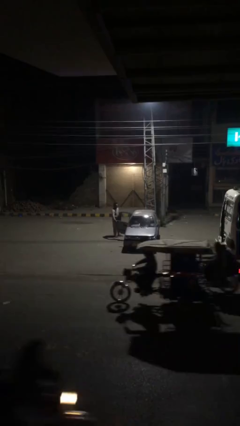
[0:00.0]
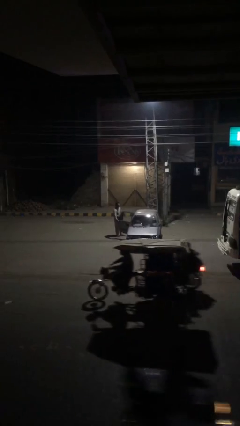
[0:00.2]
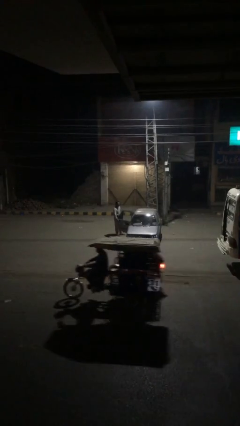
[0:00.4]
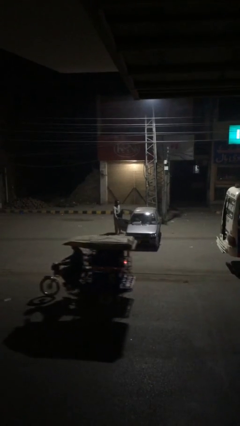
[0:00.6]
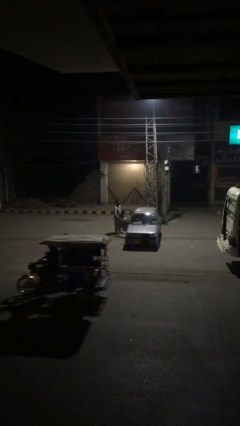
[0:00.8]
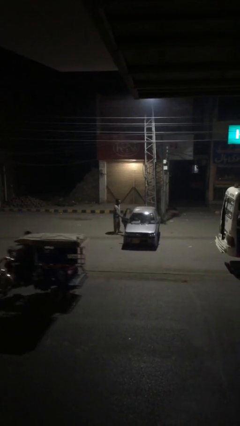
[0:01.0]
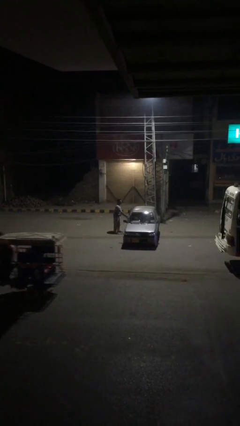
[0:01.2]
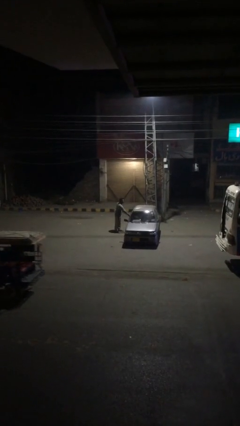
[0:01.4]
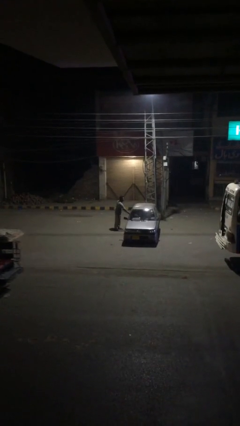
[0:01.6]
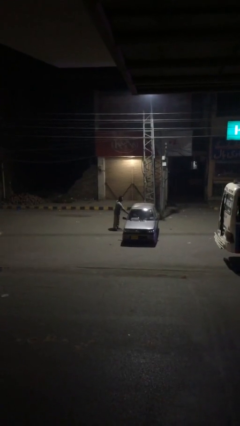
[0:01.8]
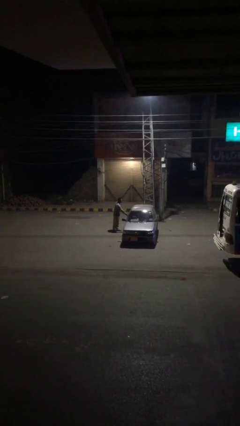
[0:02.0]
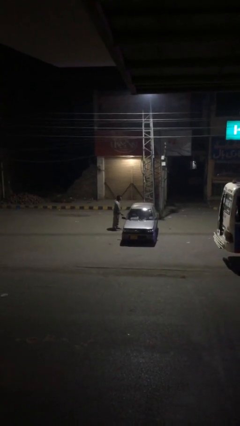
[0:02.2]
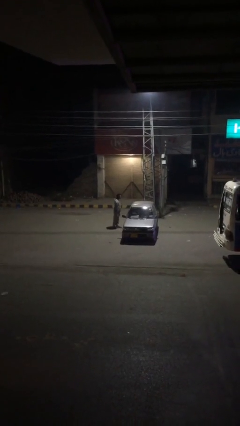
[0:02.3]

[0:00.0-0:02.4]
person closes car door

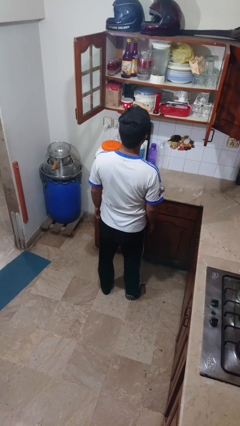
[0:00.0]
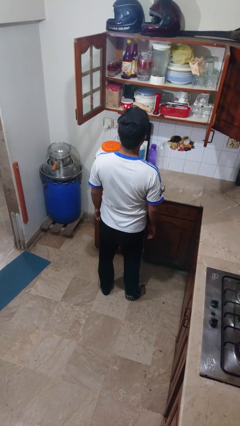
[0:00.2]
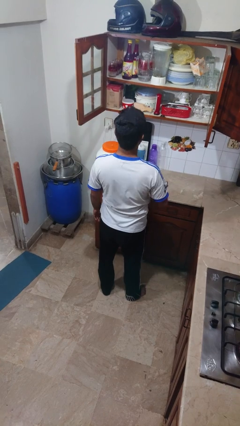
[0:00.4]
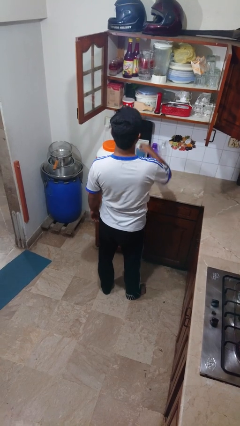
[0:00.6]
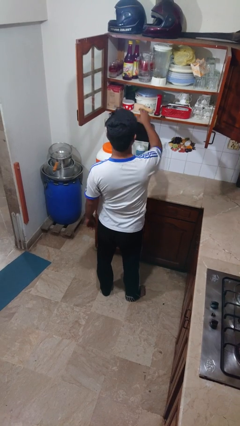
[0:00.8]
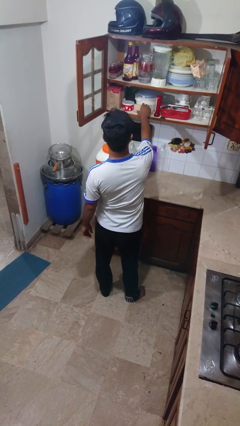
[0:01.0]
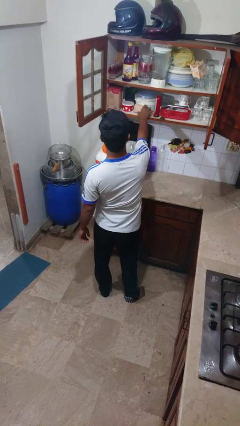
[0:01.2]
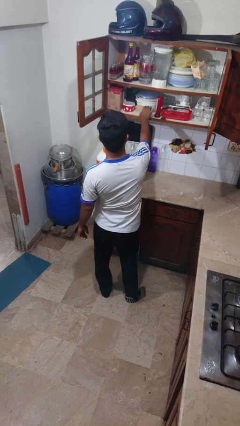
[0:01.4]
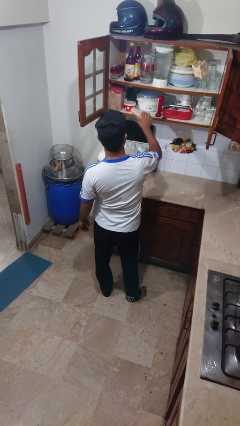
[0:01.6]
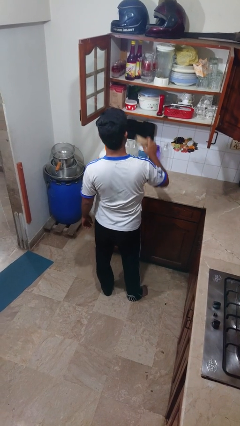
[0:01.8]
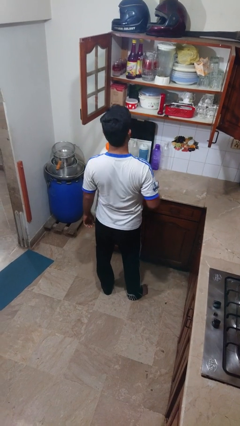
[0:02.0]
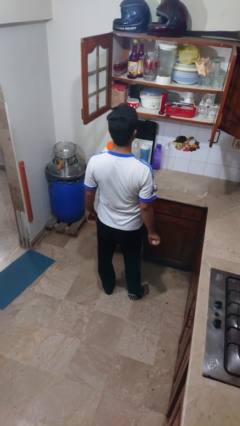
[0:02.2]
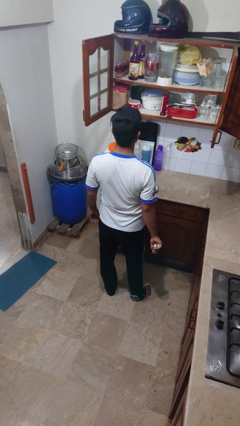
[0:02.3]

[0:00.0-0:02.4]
person picks up object from cabinet

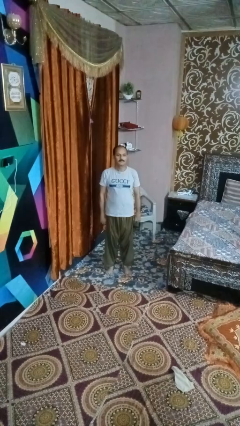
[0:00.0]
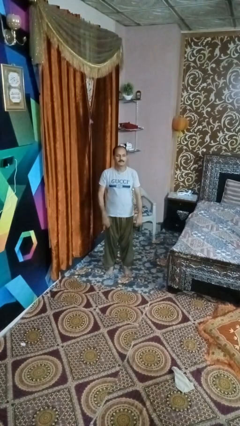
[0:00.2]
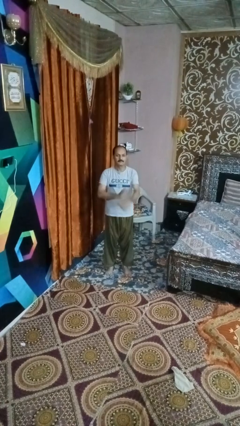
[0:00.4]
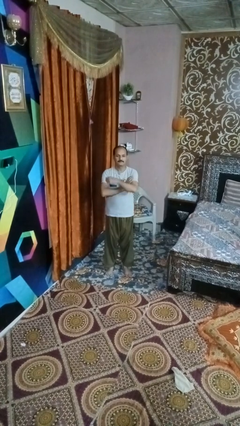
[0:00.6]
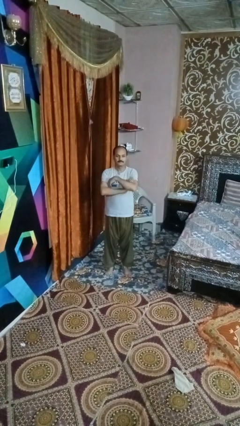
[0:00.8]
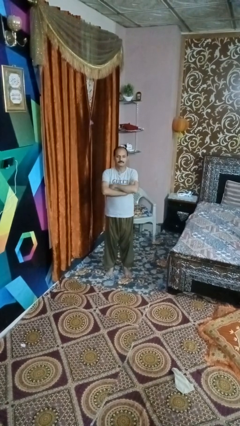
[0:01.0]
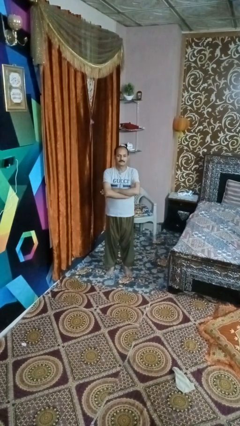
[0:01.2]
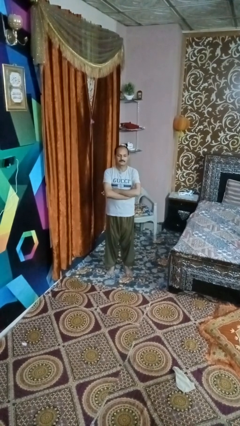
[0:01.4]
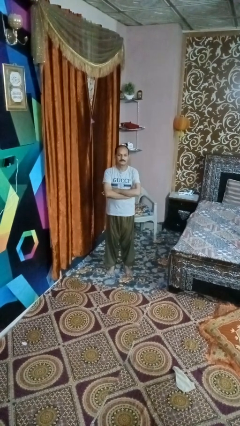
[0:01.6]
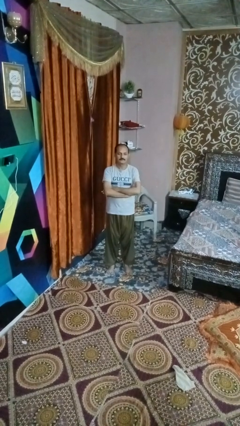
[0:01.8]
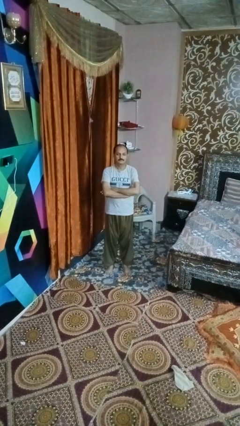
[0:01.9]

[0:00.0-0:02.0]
person crosses arms

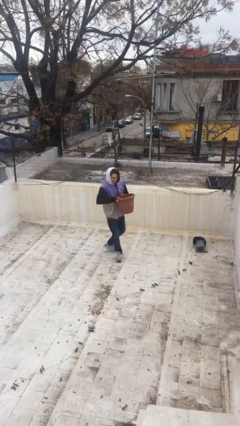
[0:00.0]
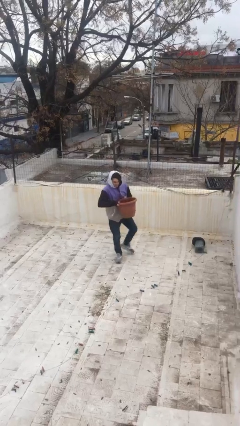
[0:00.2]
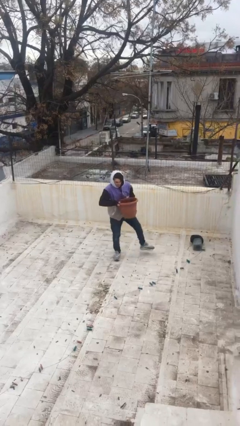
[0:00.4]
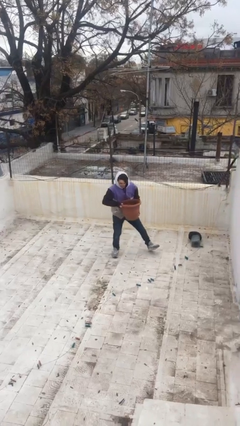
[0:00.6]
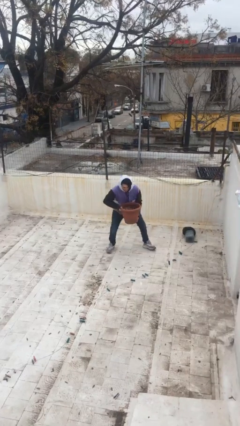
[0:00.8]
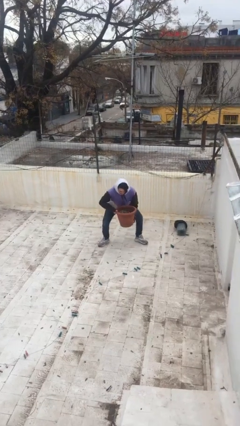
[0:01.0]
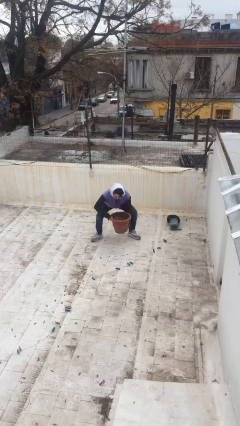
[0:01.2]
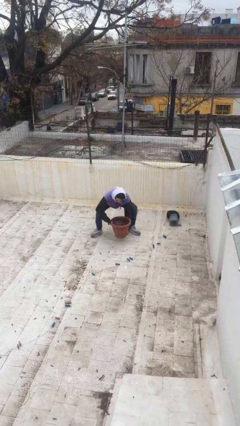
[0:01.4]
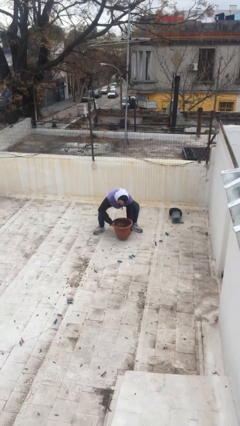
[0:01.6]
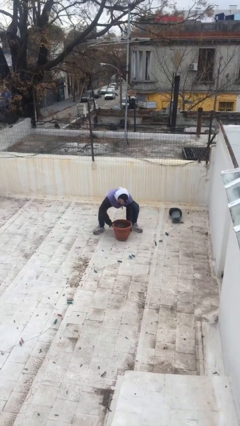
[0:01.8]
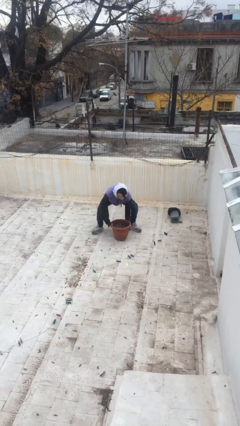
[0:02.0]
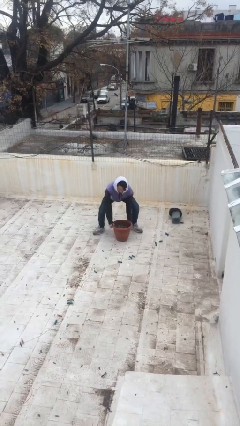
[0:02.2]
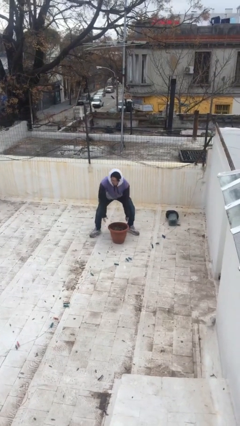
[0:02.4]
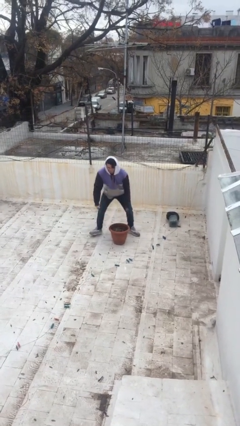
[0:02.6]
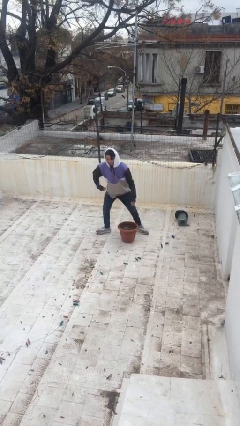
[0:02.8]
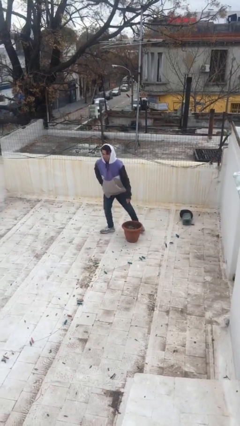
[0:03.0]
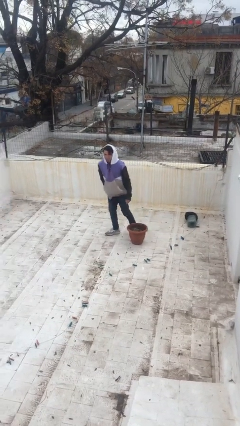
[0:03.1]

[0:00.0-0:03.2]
person puts down object on floor

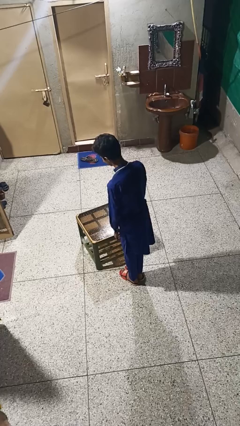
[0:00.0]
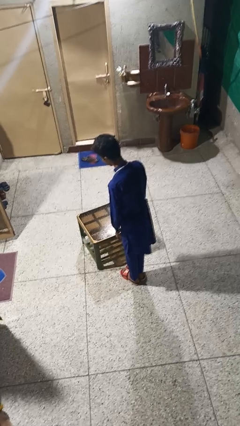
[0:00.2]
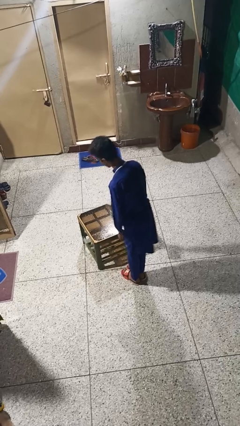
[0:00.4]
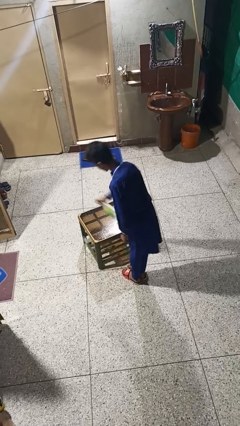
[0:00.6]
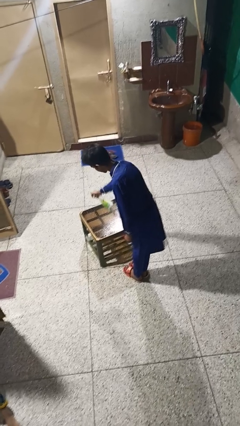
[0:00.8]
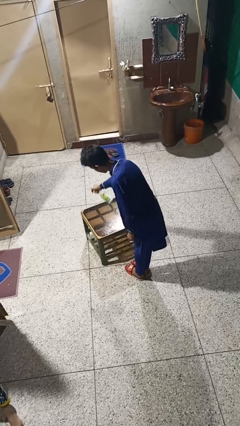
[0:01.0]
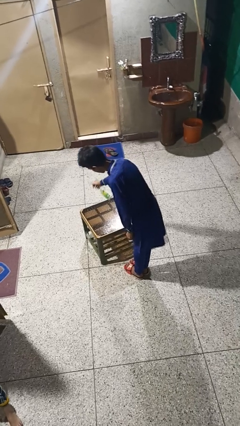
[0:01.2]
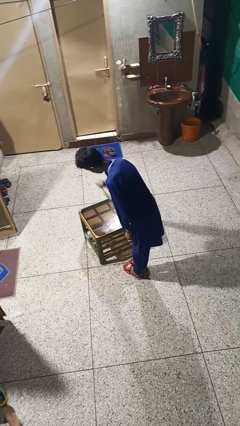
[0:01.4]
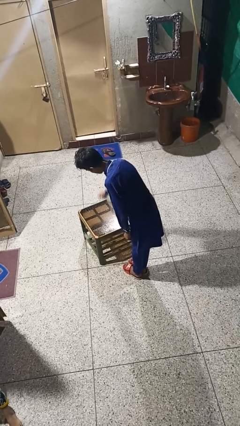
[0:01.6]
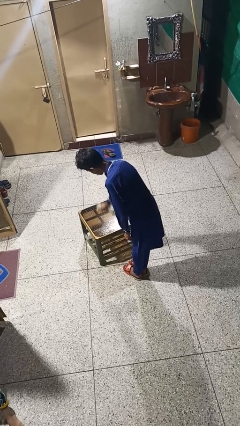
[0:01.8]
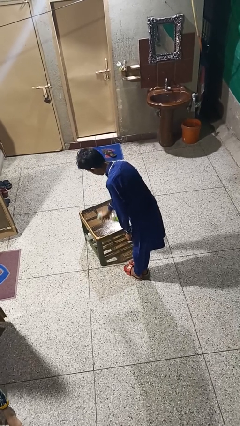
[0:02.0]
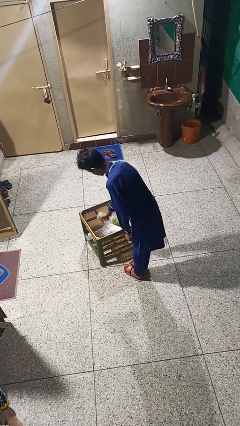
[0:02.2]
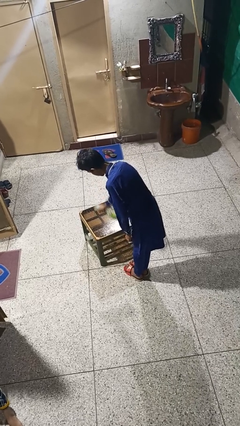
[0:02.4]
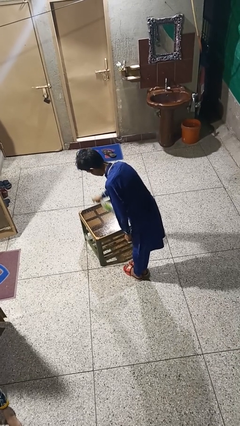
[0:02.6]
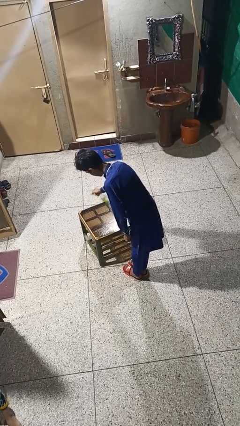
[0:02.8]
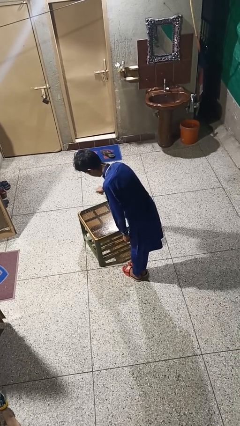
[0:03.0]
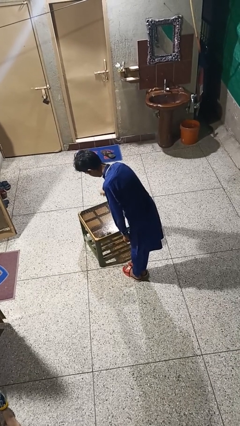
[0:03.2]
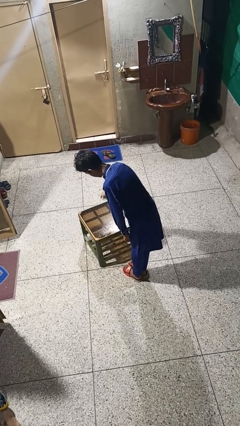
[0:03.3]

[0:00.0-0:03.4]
person sprays from bottle

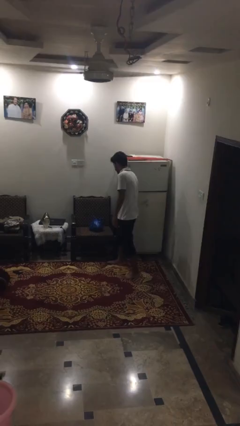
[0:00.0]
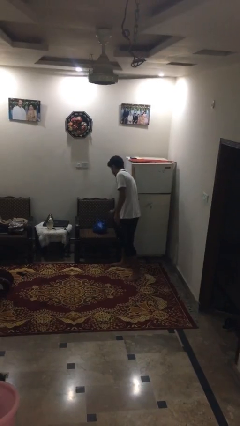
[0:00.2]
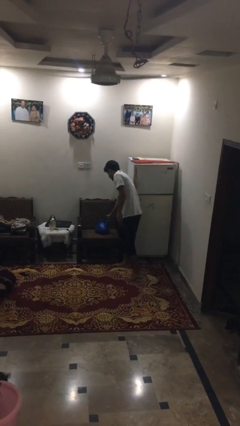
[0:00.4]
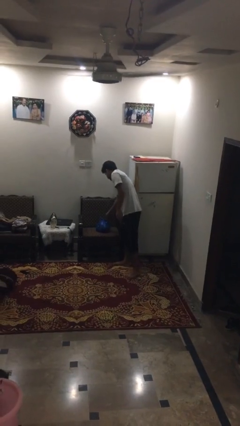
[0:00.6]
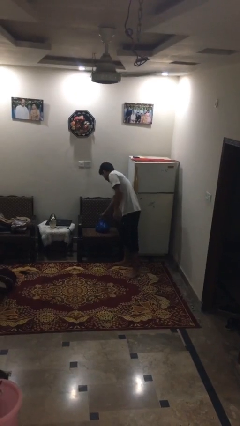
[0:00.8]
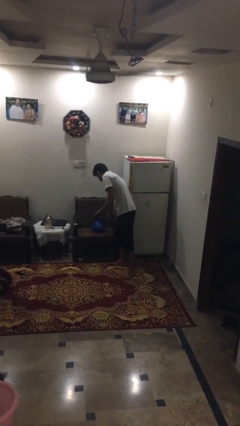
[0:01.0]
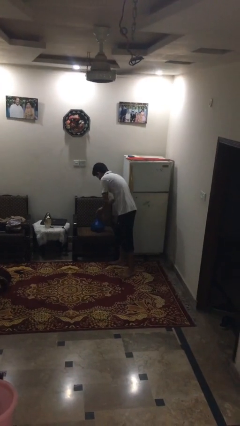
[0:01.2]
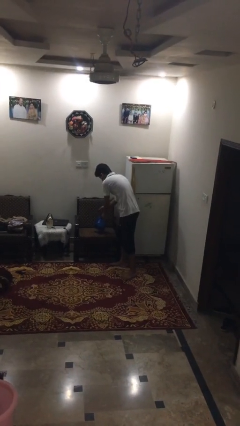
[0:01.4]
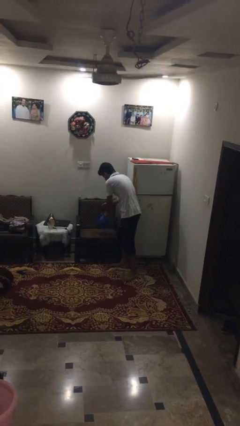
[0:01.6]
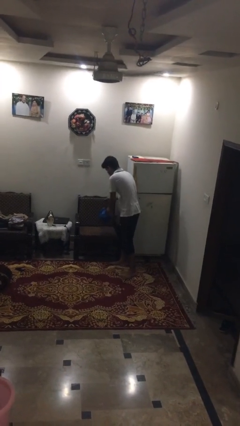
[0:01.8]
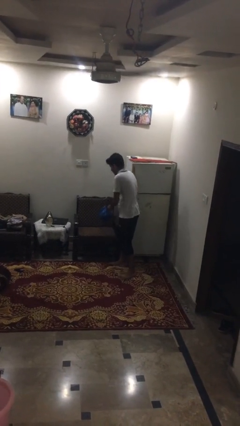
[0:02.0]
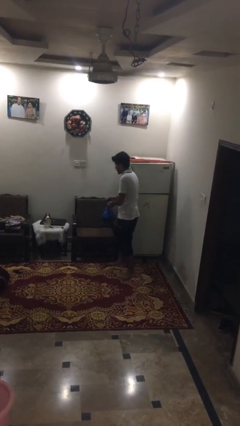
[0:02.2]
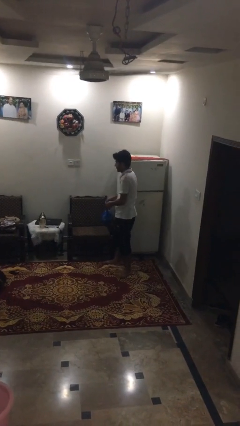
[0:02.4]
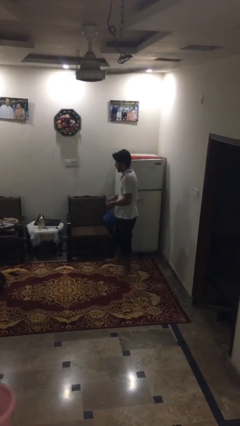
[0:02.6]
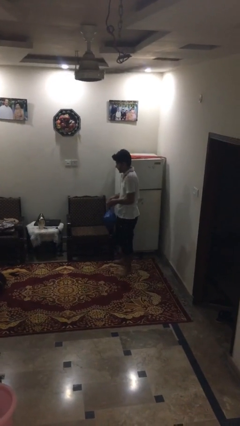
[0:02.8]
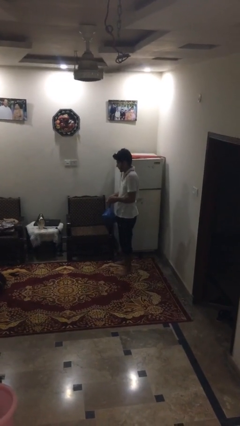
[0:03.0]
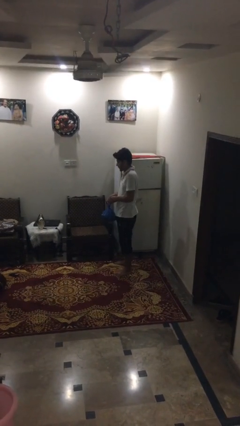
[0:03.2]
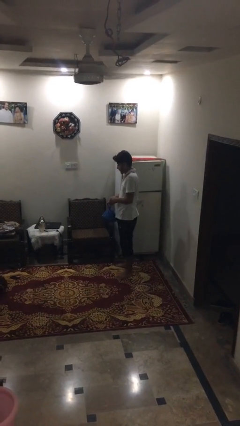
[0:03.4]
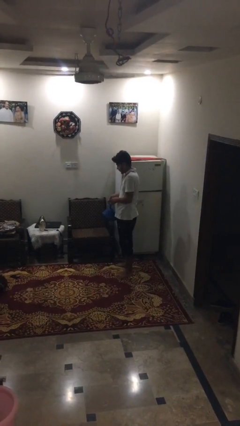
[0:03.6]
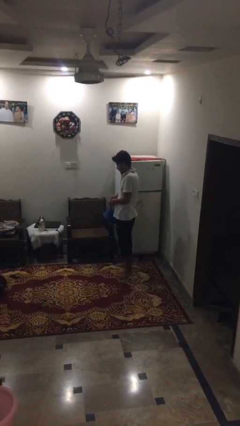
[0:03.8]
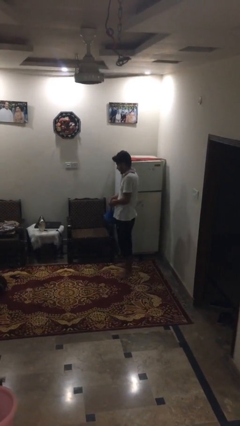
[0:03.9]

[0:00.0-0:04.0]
person picks up object from couch
